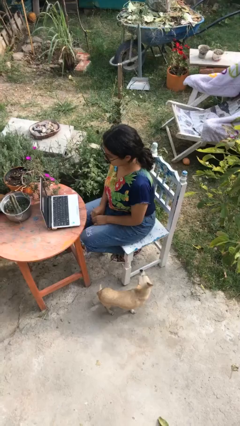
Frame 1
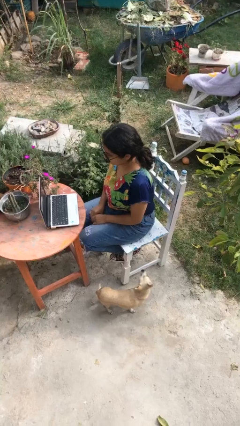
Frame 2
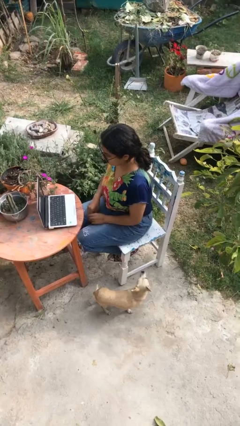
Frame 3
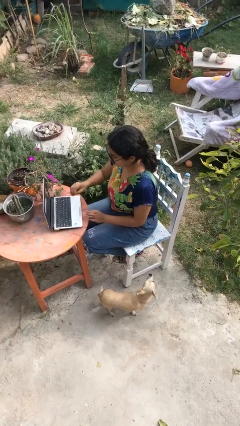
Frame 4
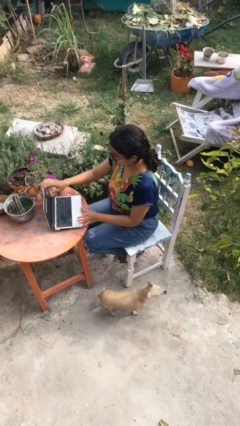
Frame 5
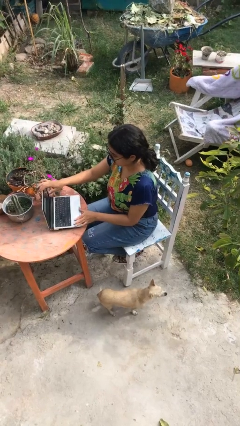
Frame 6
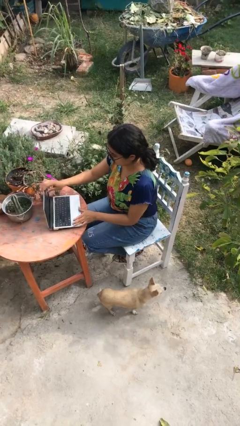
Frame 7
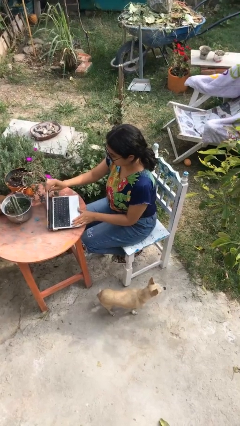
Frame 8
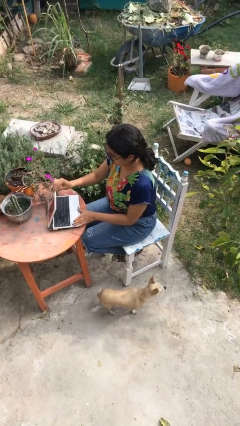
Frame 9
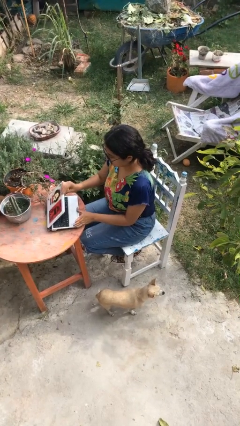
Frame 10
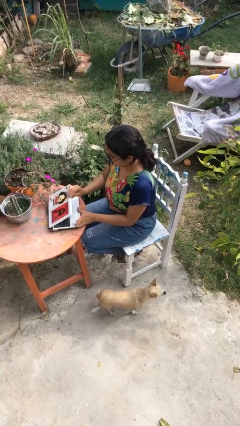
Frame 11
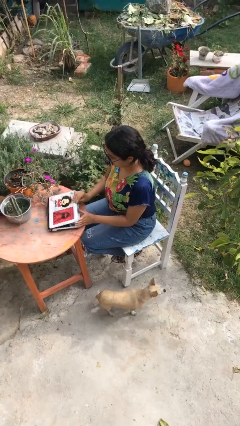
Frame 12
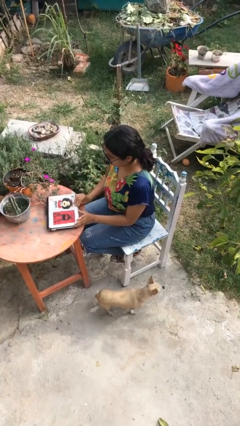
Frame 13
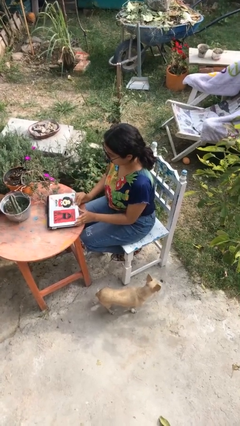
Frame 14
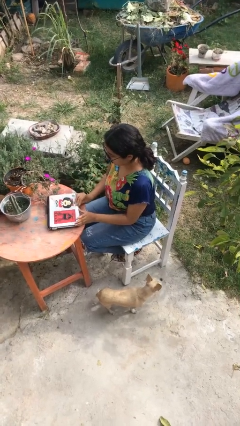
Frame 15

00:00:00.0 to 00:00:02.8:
person closes laptop

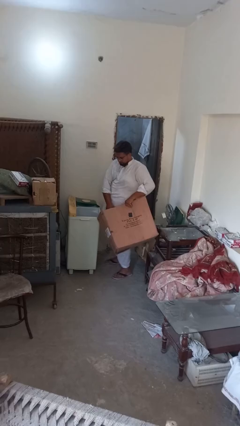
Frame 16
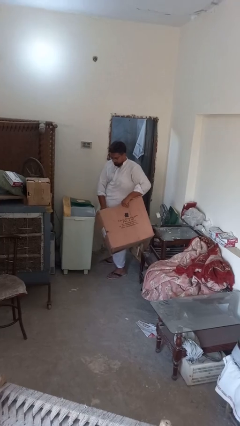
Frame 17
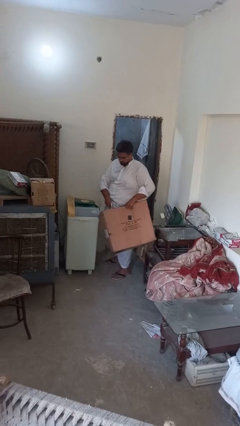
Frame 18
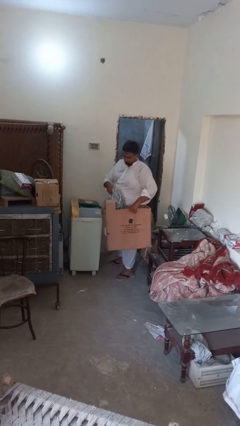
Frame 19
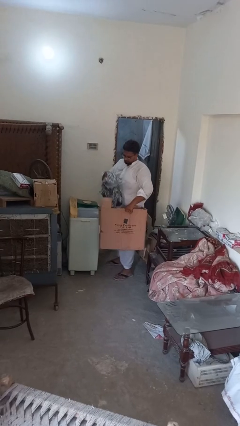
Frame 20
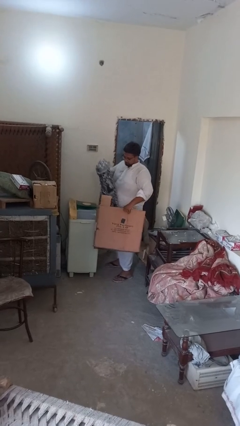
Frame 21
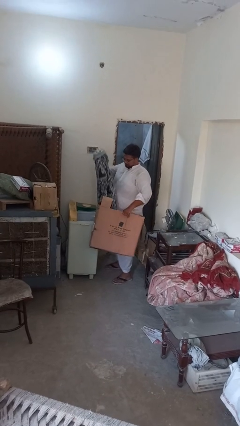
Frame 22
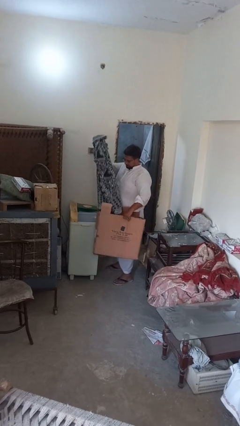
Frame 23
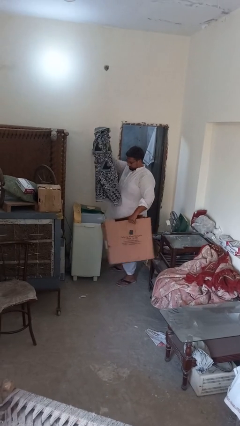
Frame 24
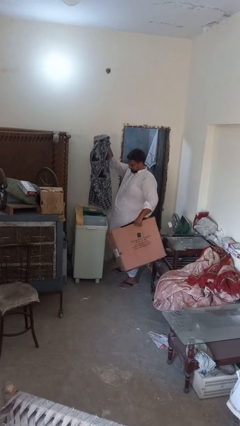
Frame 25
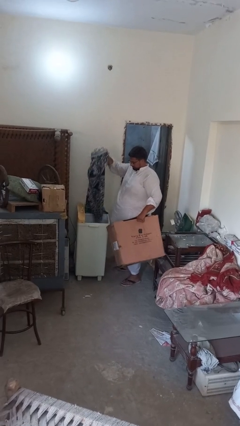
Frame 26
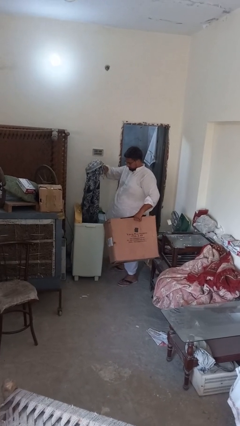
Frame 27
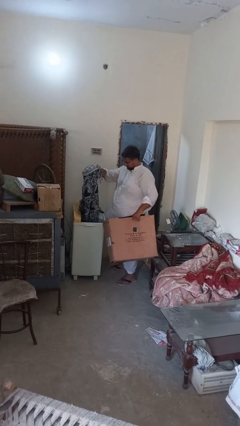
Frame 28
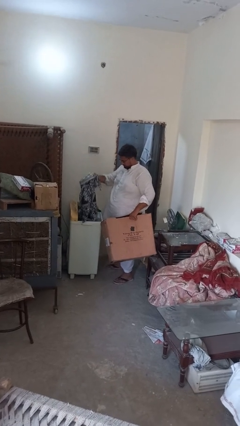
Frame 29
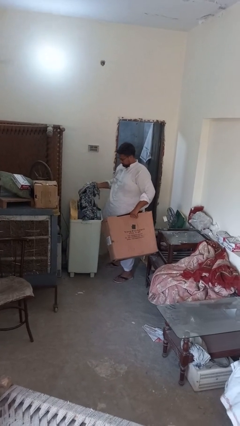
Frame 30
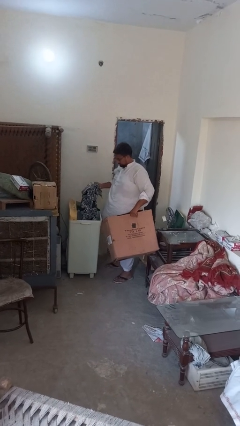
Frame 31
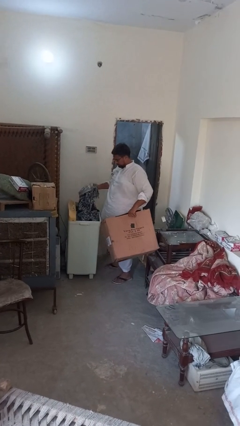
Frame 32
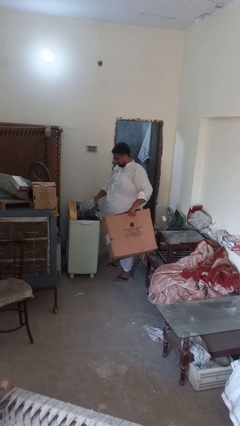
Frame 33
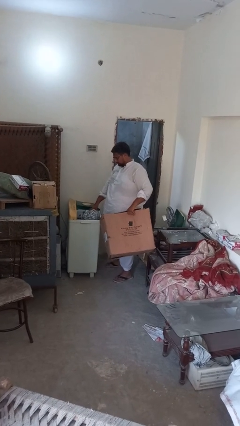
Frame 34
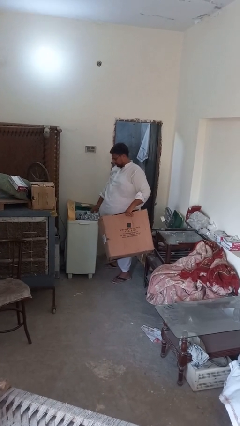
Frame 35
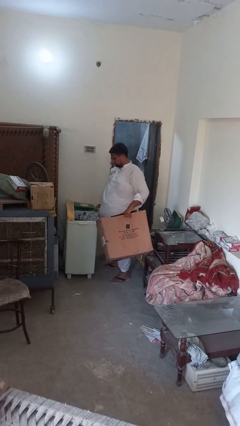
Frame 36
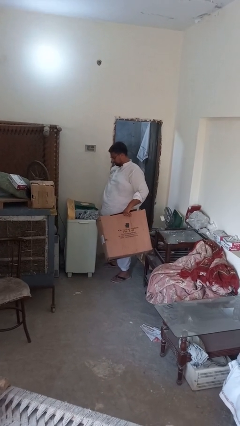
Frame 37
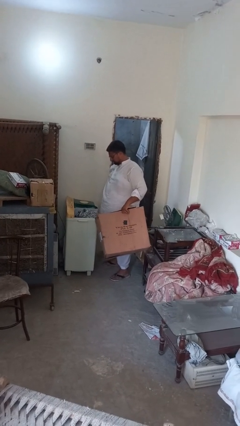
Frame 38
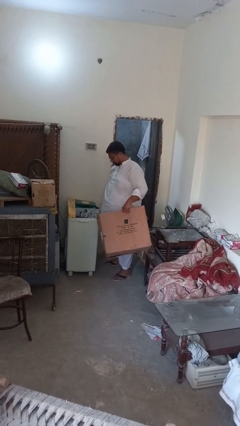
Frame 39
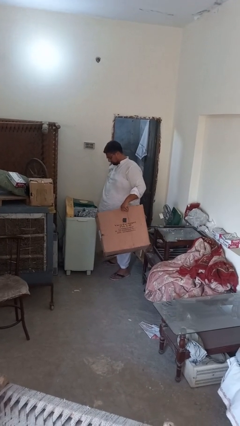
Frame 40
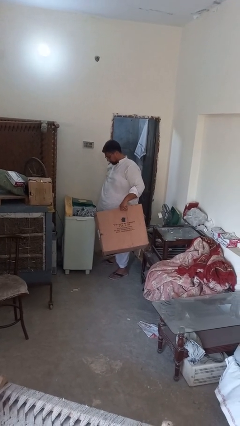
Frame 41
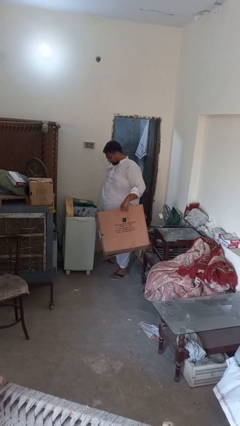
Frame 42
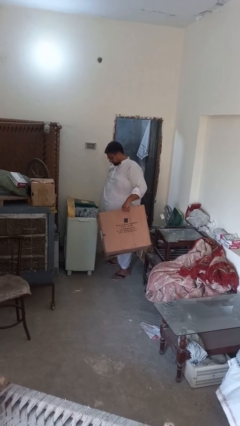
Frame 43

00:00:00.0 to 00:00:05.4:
person loads dryer

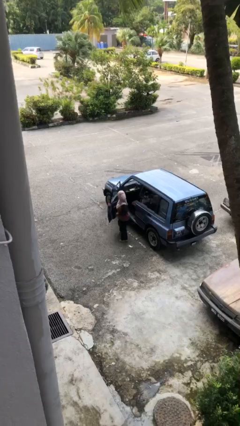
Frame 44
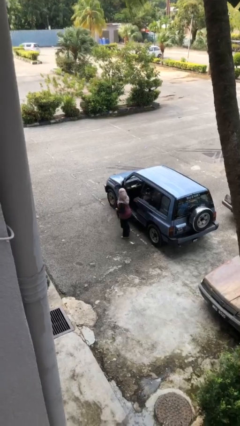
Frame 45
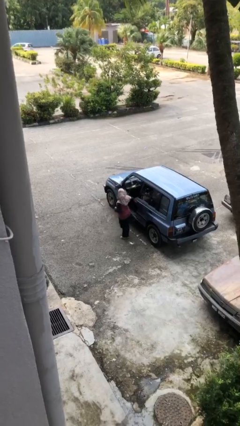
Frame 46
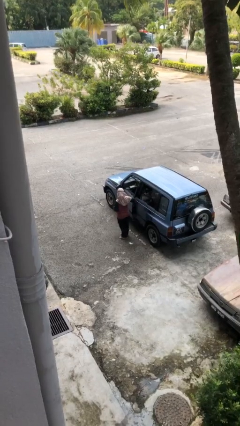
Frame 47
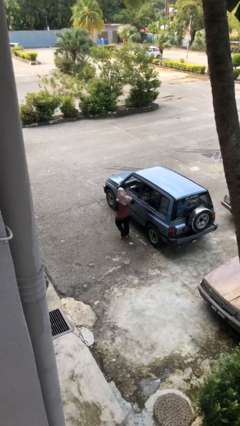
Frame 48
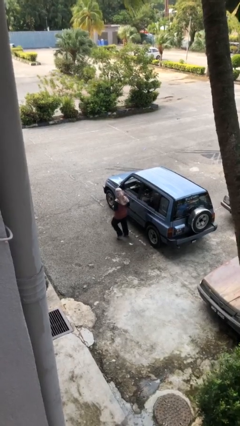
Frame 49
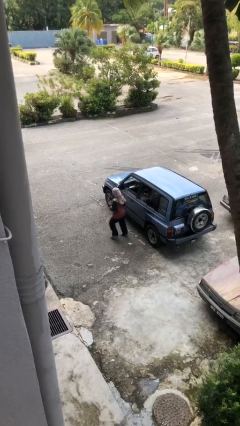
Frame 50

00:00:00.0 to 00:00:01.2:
person closes car door

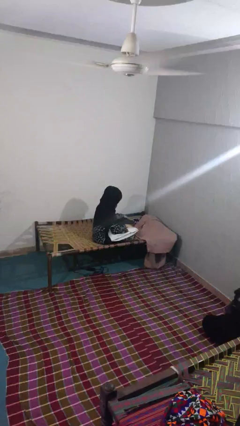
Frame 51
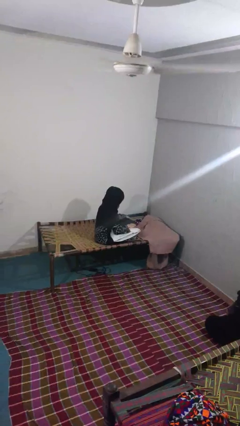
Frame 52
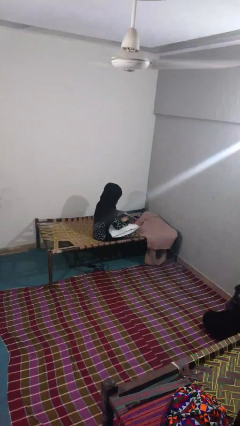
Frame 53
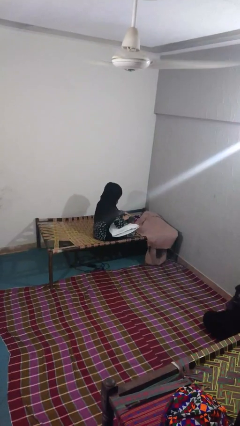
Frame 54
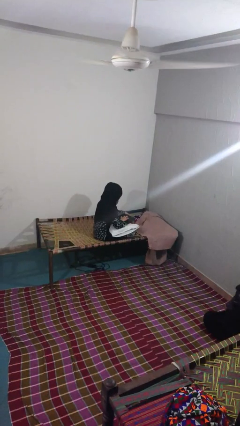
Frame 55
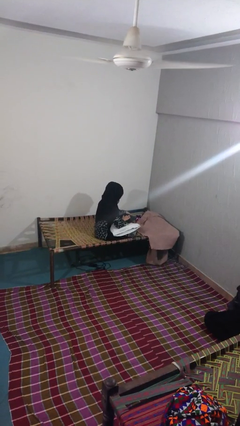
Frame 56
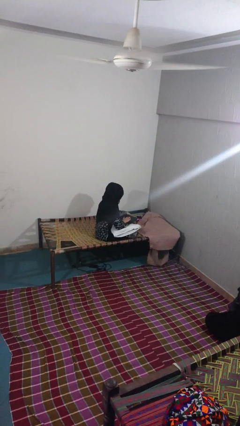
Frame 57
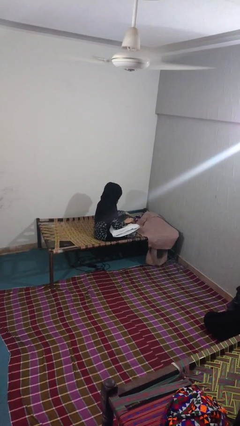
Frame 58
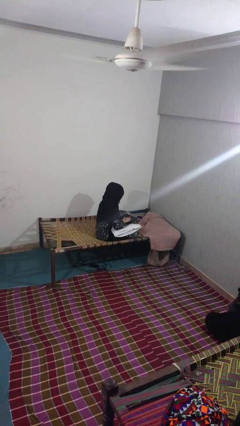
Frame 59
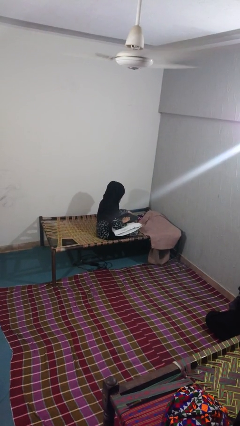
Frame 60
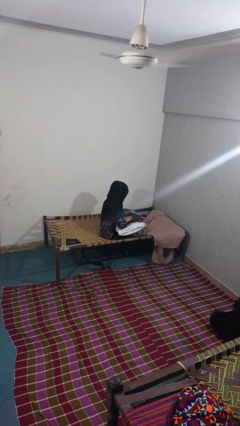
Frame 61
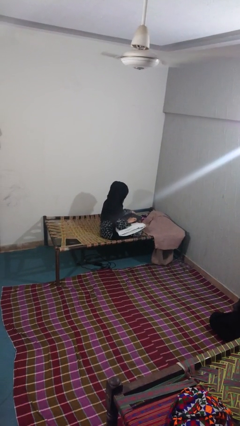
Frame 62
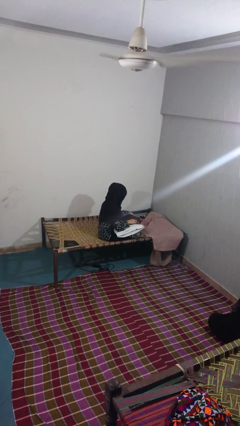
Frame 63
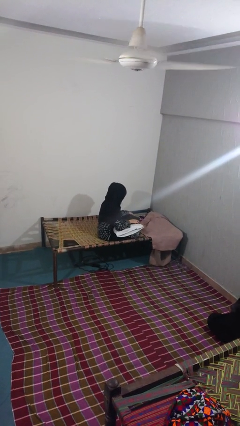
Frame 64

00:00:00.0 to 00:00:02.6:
person interacts with tablet

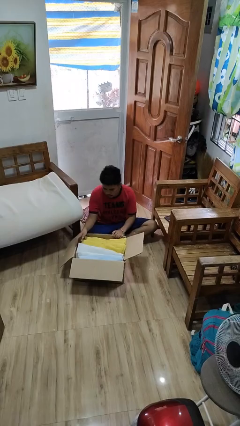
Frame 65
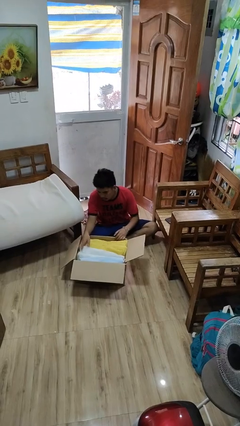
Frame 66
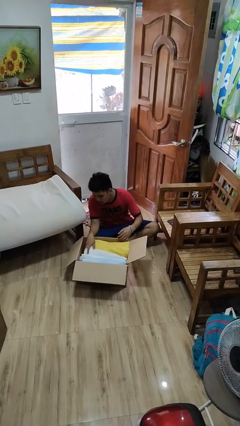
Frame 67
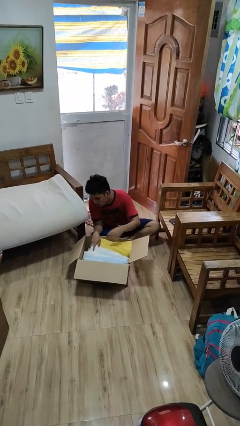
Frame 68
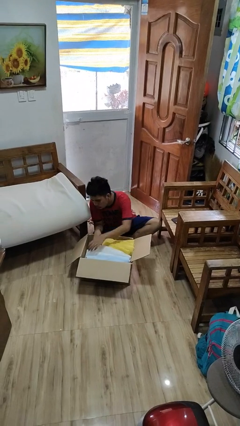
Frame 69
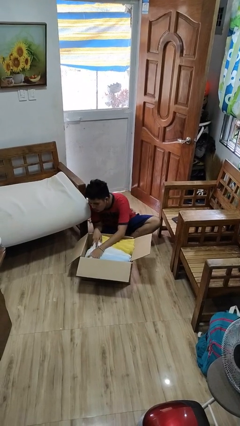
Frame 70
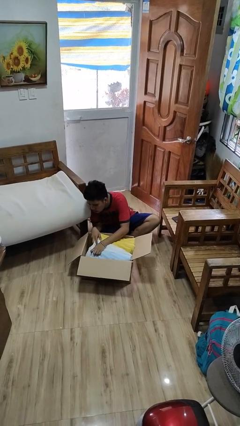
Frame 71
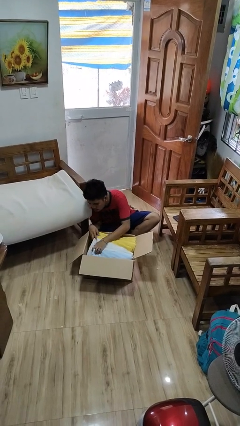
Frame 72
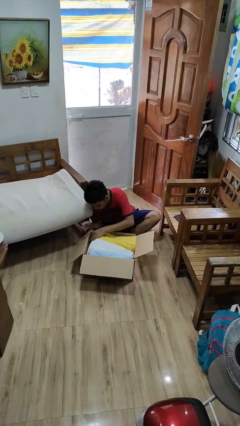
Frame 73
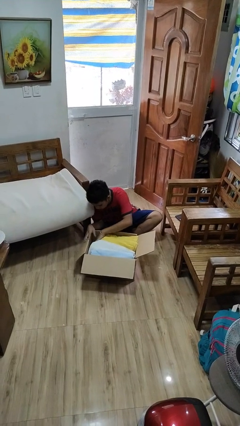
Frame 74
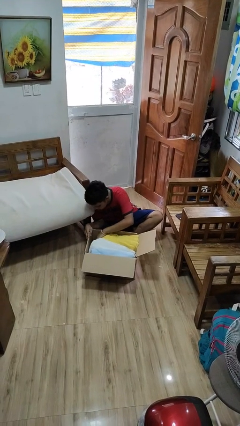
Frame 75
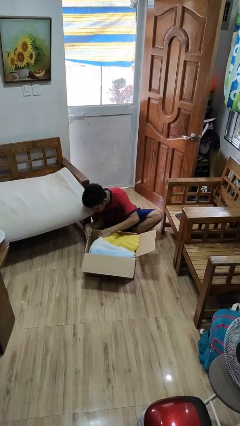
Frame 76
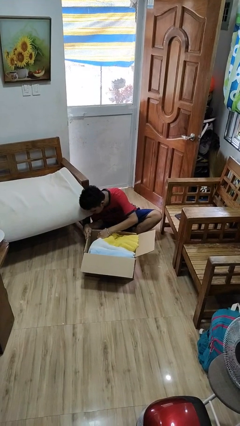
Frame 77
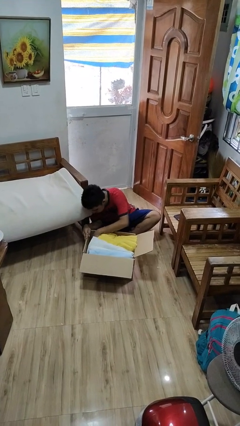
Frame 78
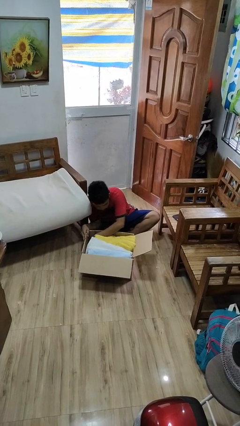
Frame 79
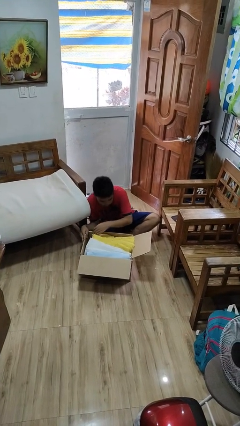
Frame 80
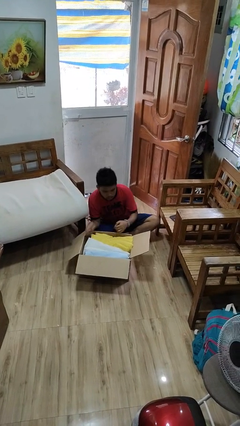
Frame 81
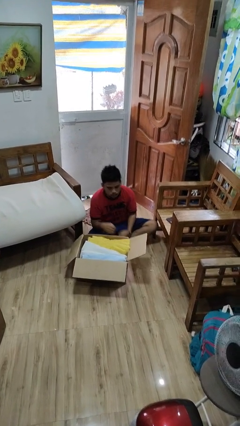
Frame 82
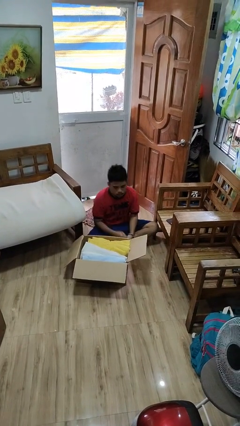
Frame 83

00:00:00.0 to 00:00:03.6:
person searches in box

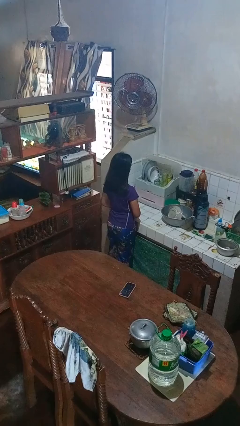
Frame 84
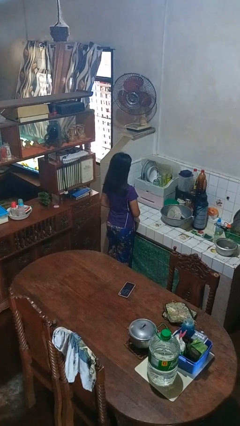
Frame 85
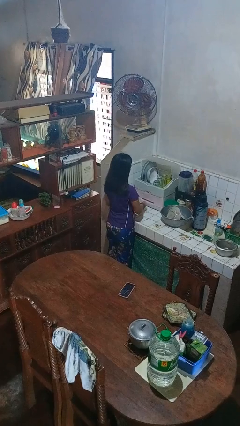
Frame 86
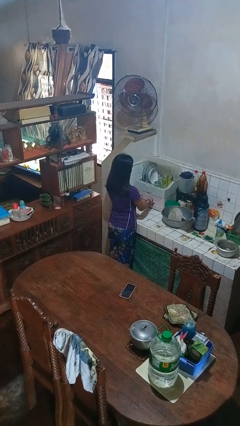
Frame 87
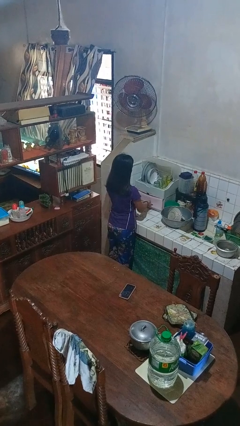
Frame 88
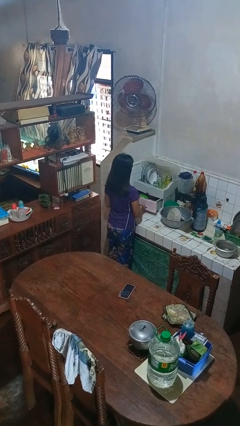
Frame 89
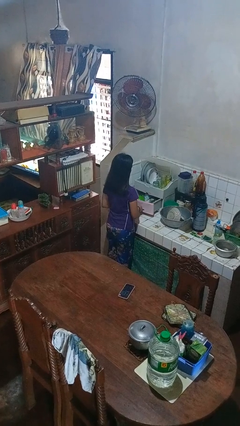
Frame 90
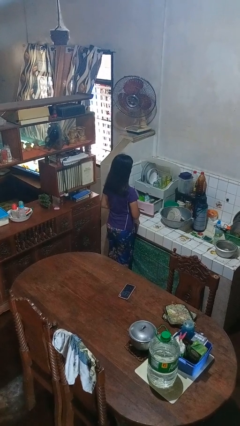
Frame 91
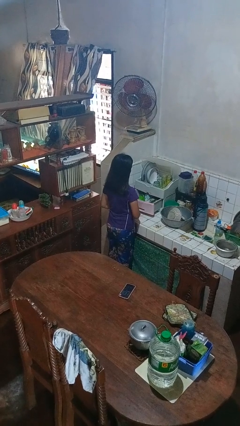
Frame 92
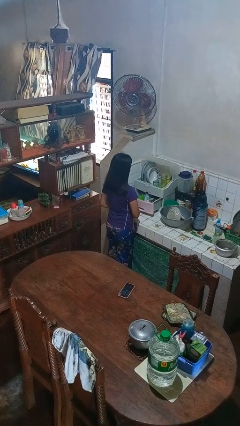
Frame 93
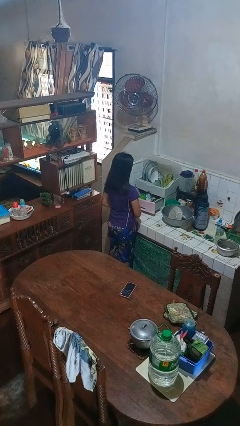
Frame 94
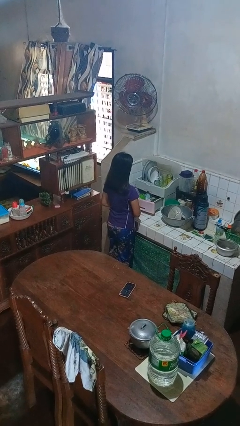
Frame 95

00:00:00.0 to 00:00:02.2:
person opens kitchen drawer
